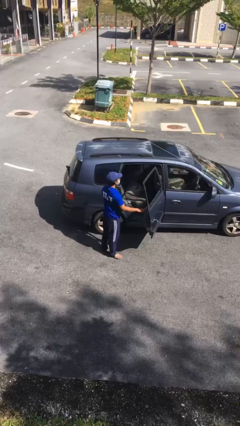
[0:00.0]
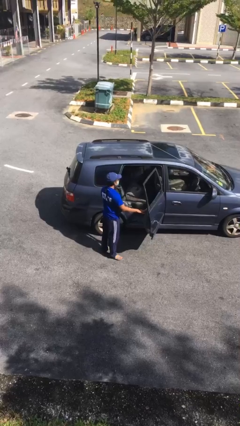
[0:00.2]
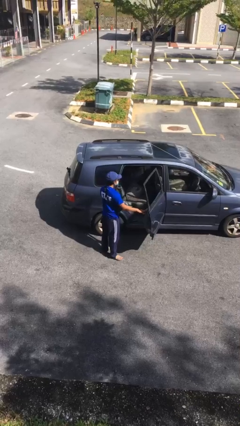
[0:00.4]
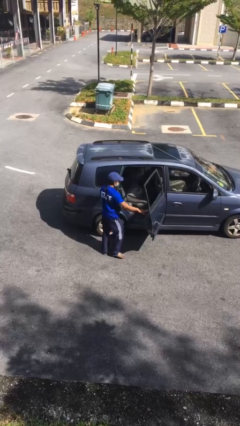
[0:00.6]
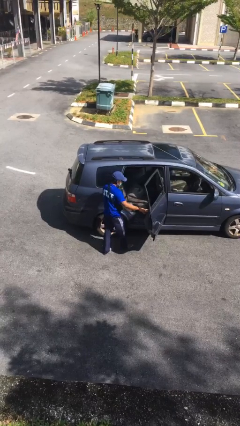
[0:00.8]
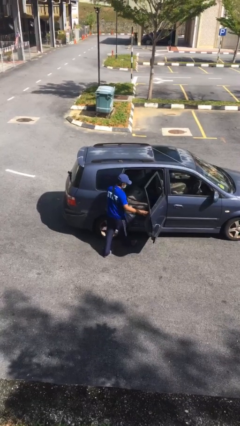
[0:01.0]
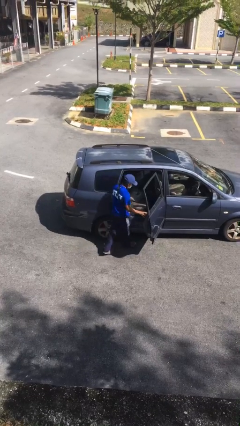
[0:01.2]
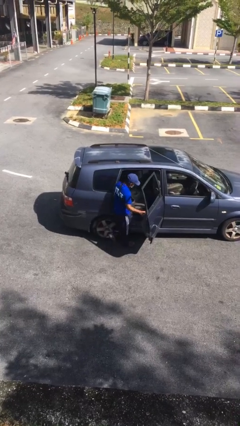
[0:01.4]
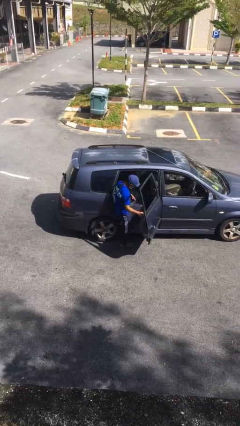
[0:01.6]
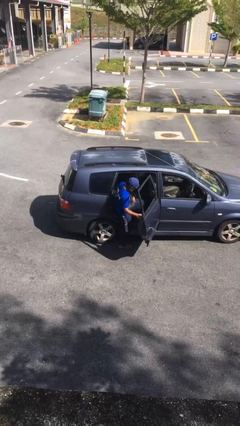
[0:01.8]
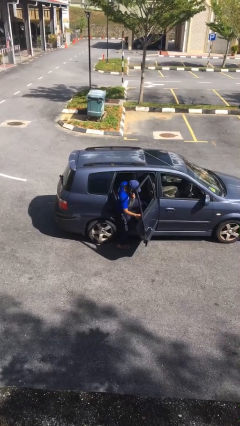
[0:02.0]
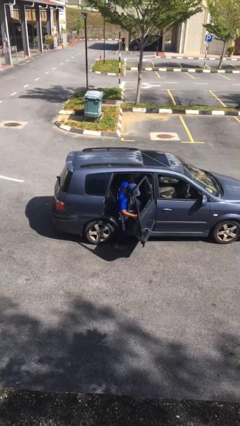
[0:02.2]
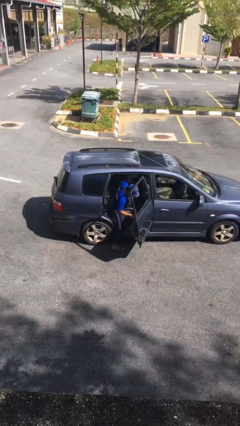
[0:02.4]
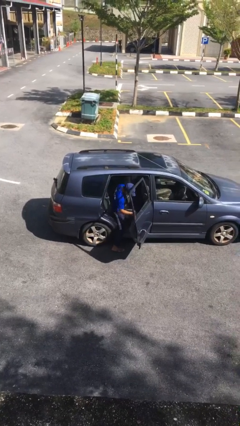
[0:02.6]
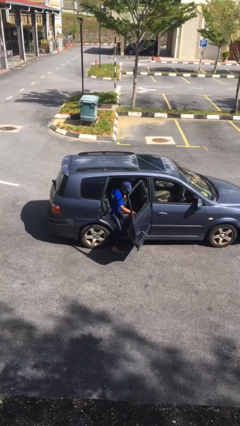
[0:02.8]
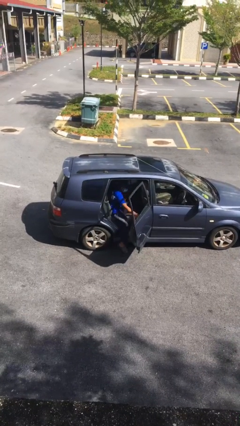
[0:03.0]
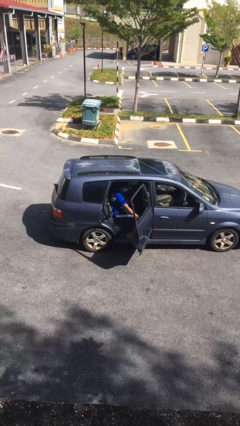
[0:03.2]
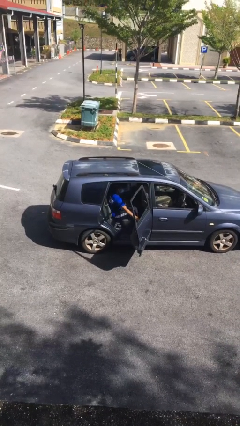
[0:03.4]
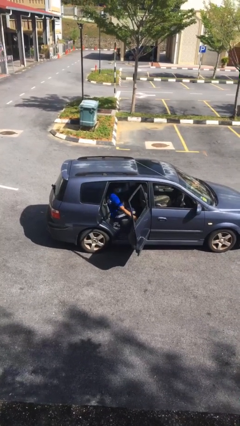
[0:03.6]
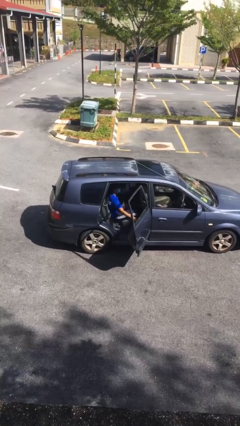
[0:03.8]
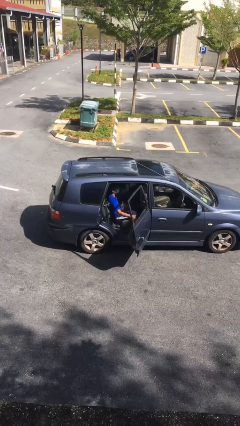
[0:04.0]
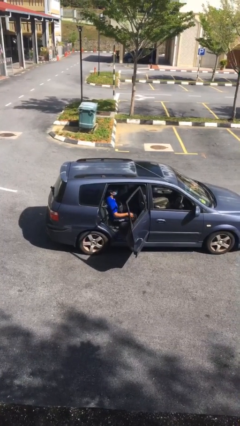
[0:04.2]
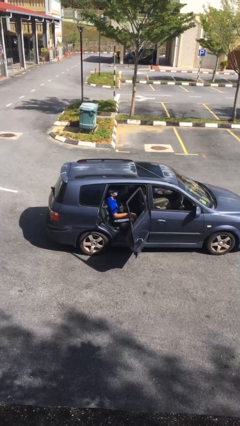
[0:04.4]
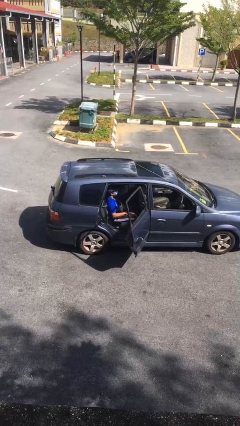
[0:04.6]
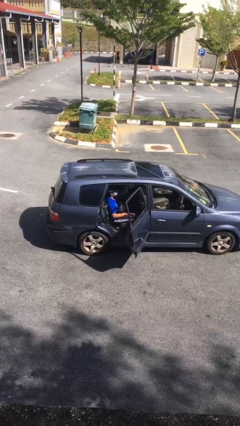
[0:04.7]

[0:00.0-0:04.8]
person enters car

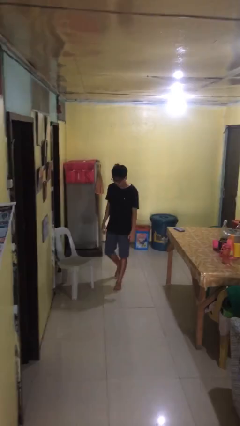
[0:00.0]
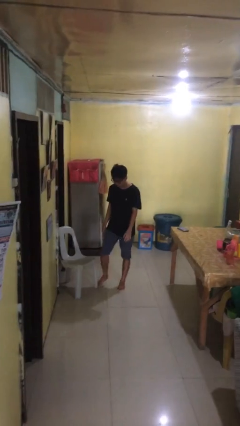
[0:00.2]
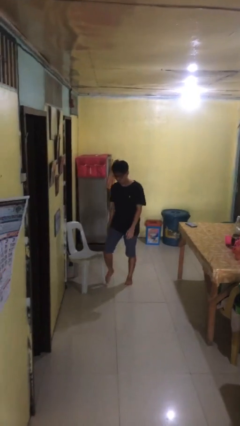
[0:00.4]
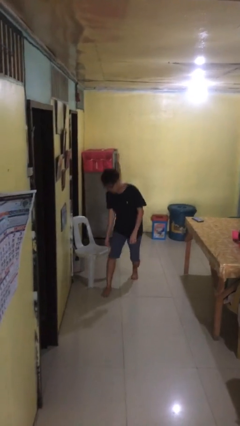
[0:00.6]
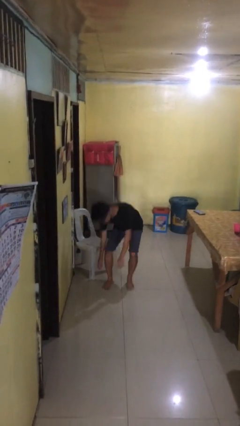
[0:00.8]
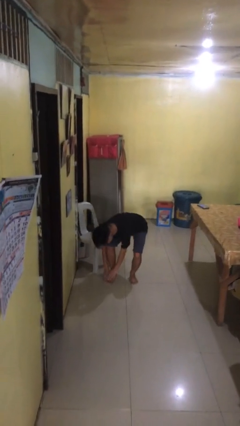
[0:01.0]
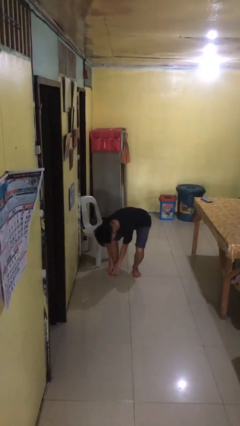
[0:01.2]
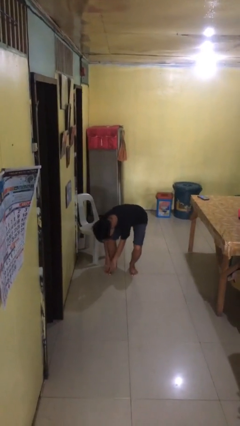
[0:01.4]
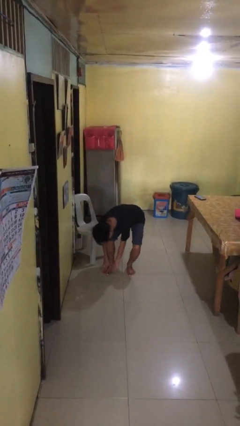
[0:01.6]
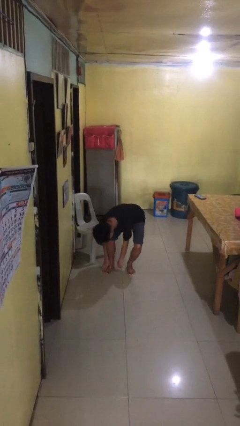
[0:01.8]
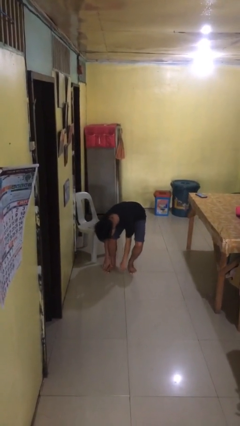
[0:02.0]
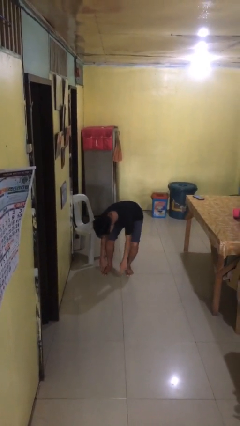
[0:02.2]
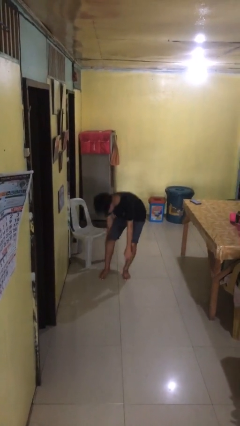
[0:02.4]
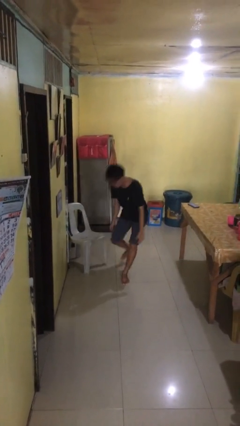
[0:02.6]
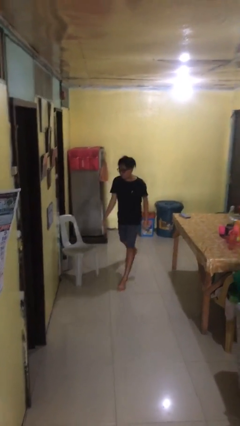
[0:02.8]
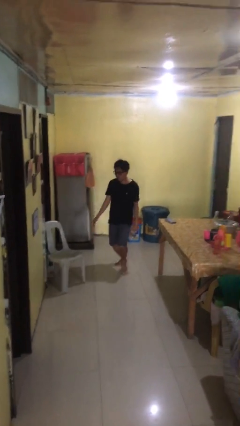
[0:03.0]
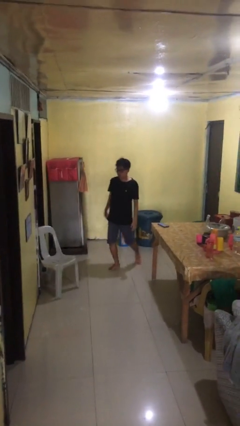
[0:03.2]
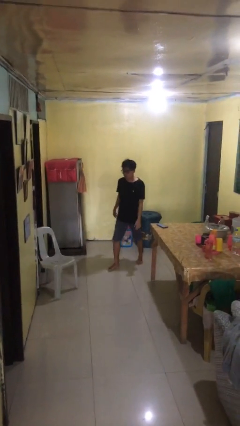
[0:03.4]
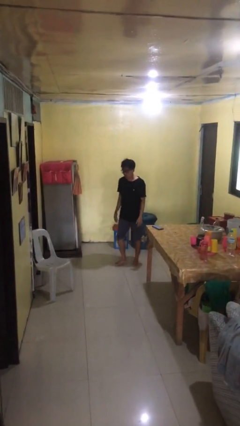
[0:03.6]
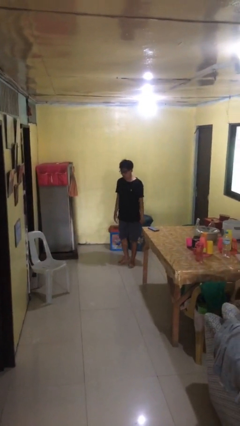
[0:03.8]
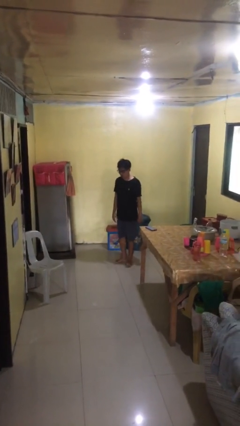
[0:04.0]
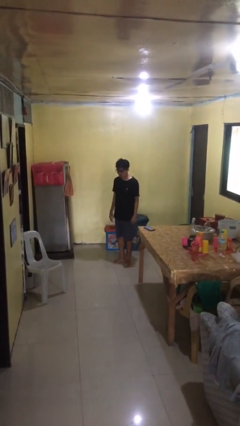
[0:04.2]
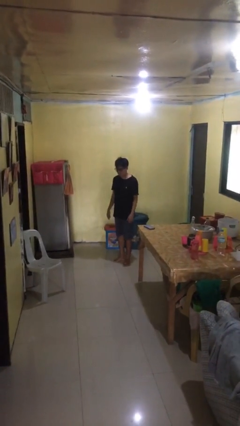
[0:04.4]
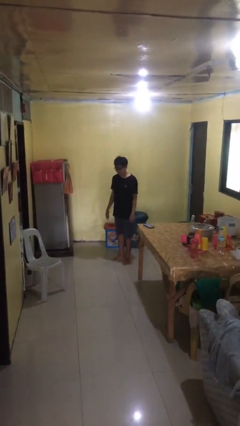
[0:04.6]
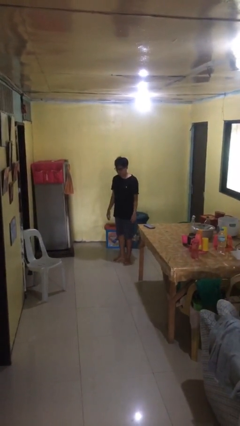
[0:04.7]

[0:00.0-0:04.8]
person stubs toe

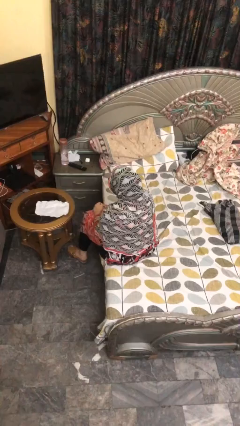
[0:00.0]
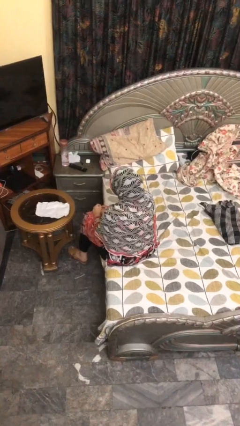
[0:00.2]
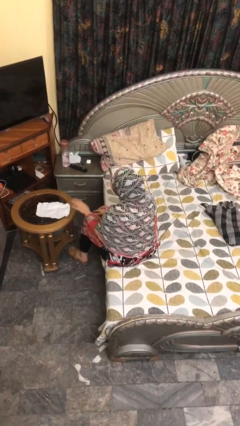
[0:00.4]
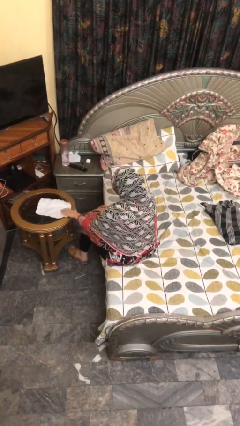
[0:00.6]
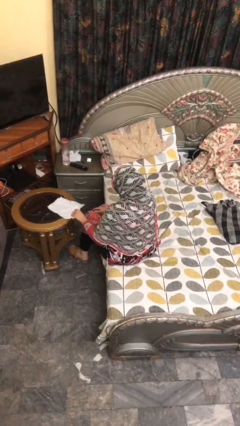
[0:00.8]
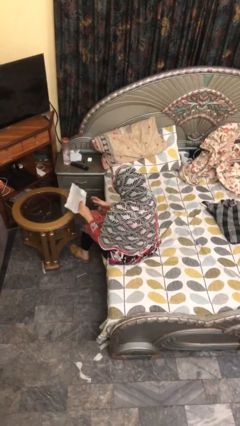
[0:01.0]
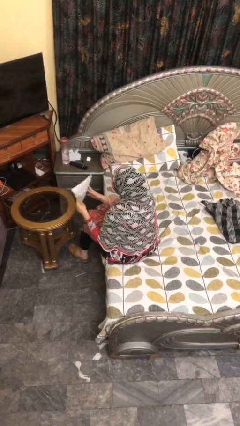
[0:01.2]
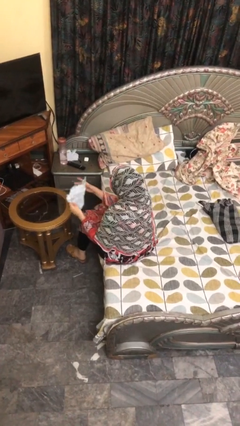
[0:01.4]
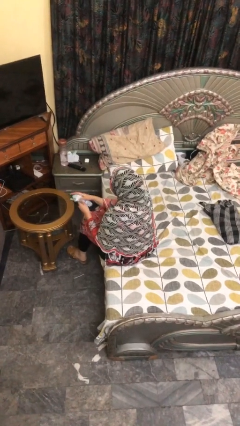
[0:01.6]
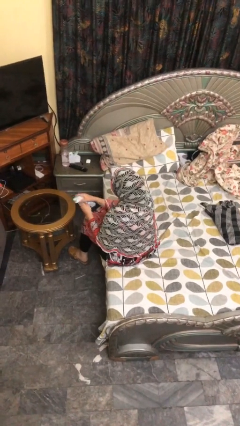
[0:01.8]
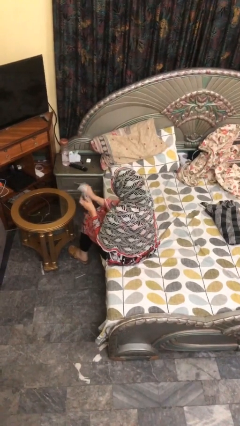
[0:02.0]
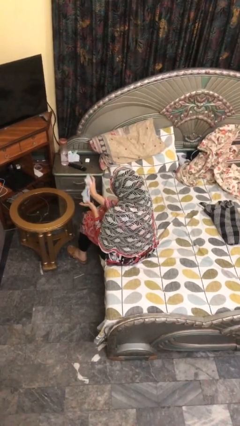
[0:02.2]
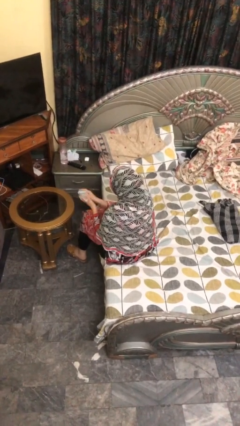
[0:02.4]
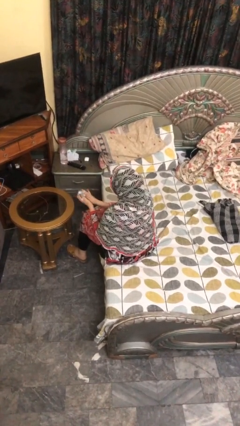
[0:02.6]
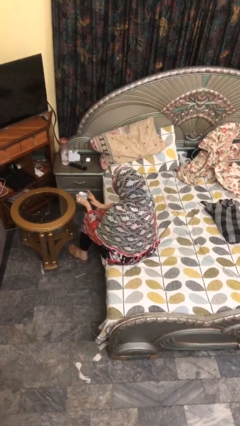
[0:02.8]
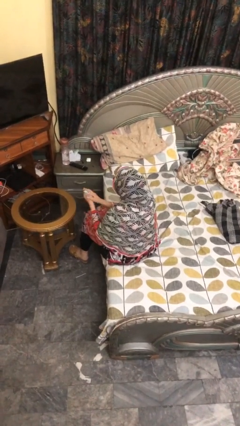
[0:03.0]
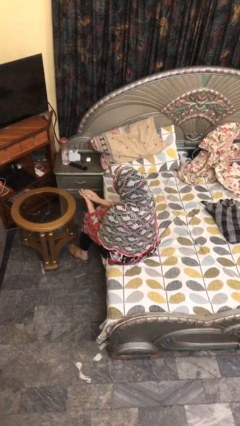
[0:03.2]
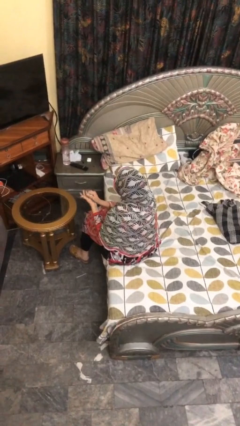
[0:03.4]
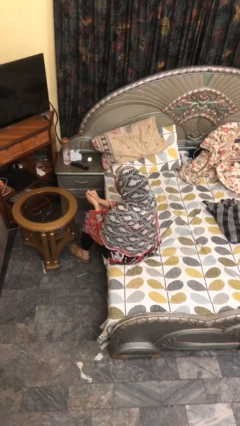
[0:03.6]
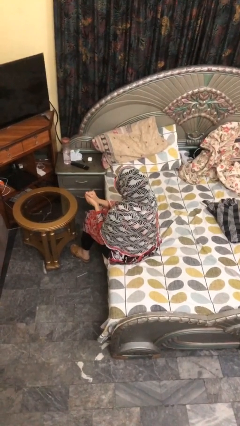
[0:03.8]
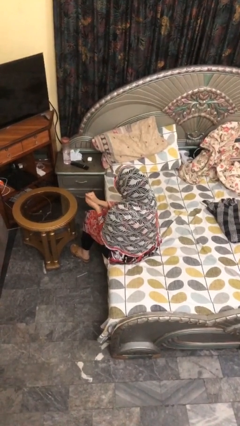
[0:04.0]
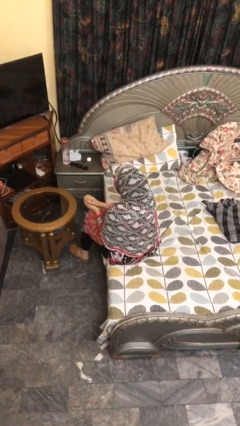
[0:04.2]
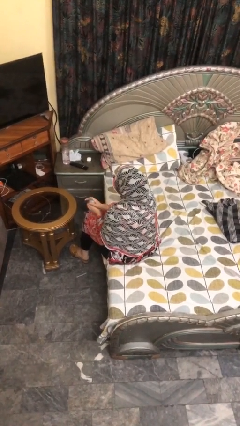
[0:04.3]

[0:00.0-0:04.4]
person crumples paper

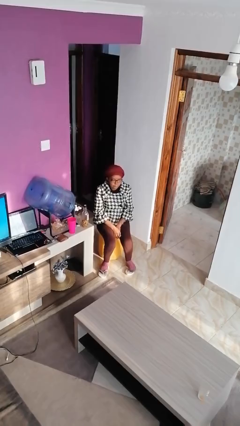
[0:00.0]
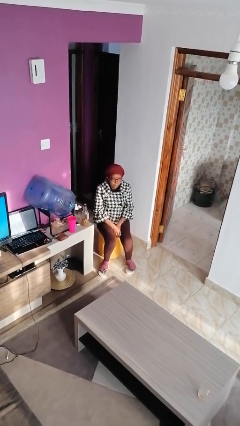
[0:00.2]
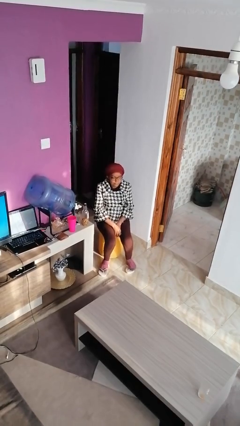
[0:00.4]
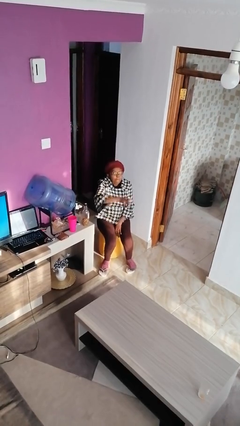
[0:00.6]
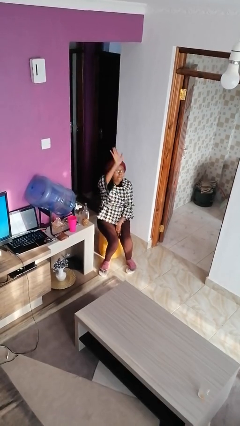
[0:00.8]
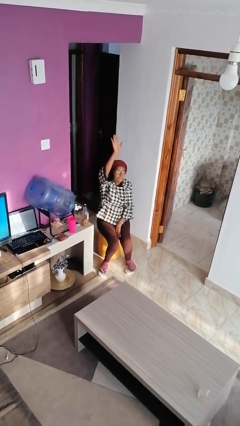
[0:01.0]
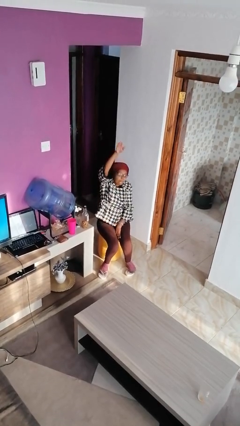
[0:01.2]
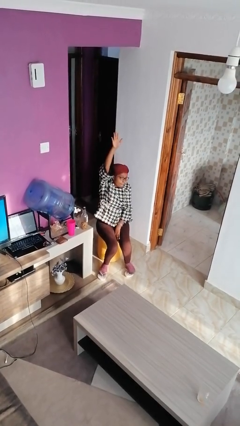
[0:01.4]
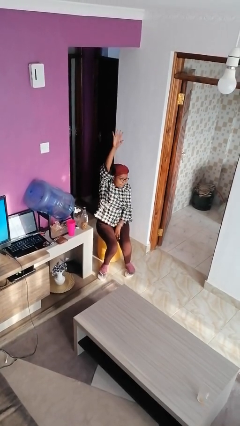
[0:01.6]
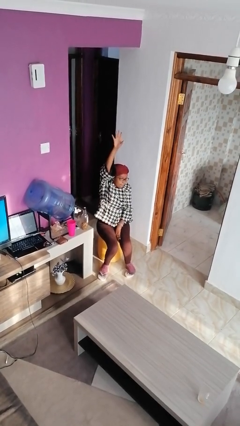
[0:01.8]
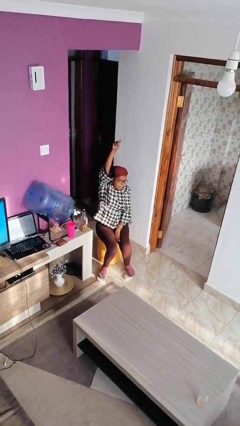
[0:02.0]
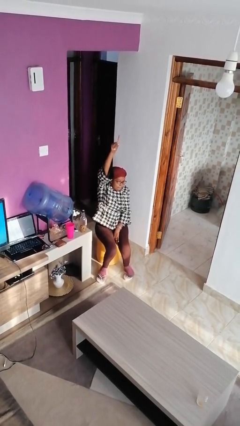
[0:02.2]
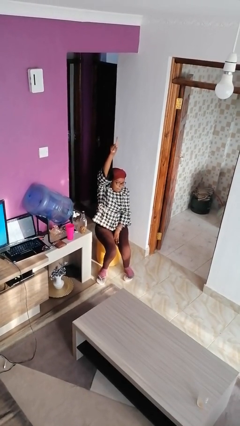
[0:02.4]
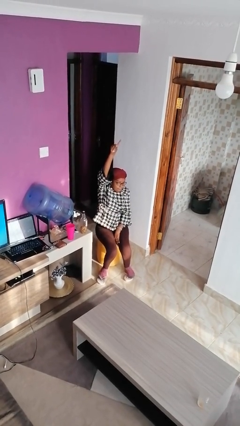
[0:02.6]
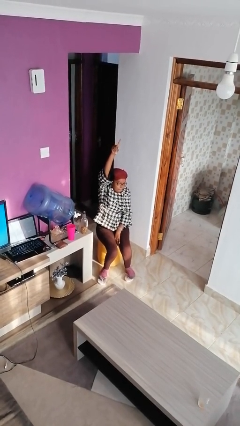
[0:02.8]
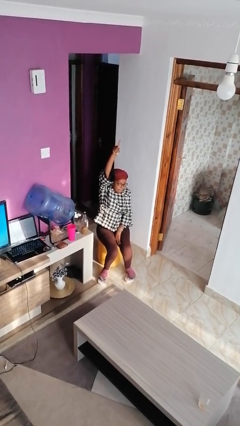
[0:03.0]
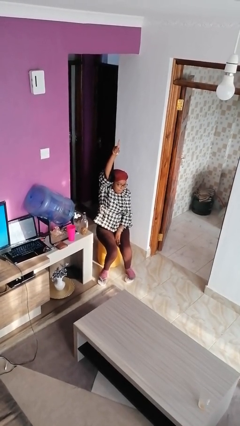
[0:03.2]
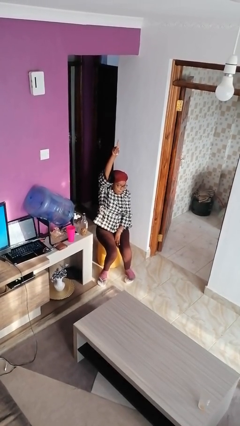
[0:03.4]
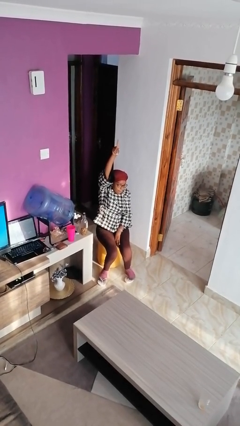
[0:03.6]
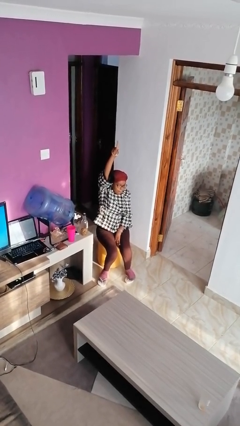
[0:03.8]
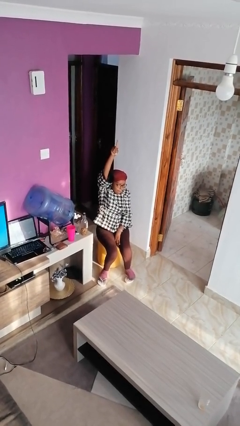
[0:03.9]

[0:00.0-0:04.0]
person gestures raise hand
